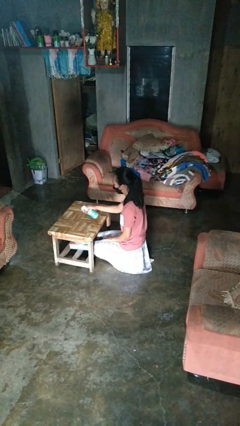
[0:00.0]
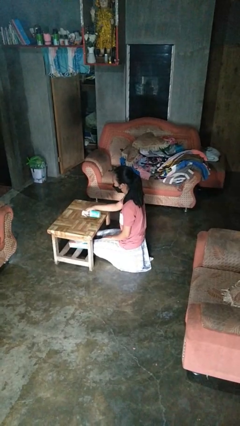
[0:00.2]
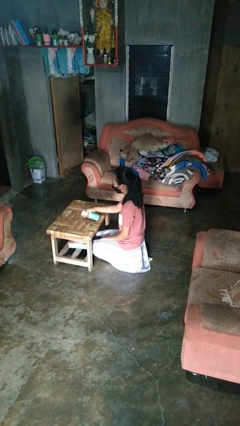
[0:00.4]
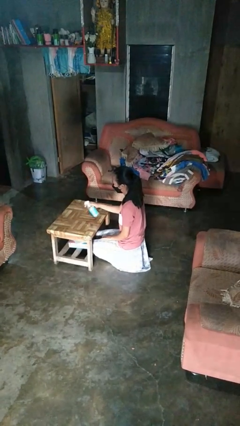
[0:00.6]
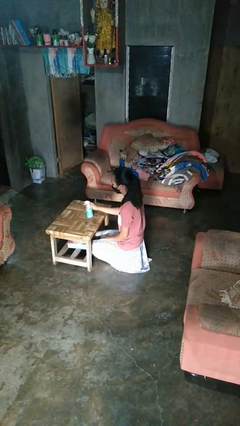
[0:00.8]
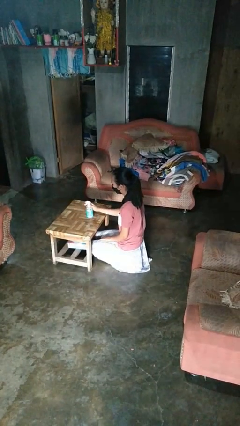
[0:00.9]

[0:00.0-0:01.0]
person sprays from bottle

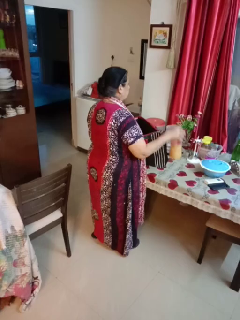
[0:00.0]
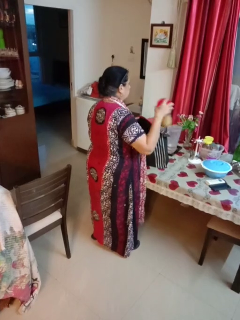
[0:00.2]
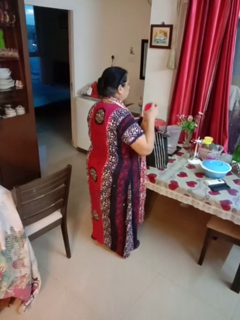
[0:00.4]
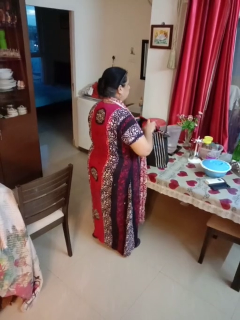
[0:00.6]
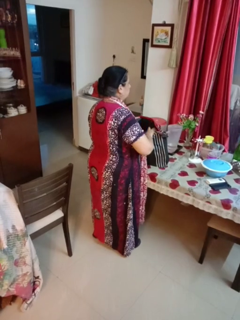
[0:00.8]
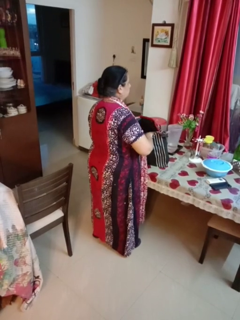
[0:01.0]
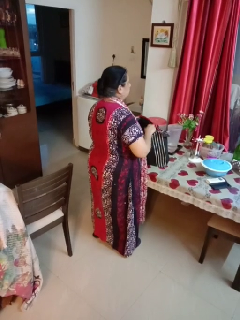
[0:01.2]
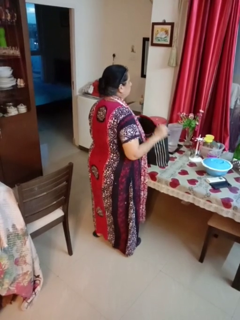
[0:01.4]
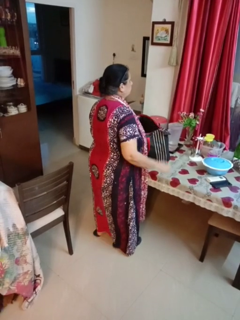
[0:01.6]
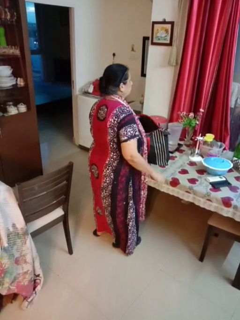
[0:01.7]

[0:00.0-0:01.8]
person puts object into bag

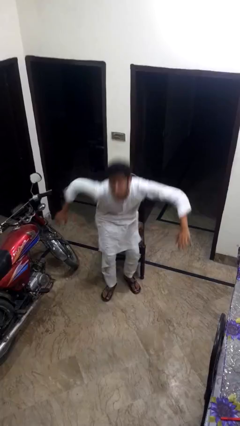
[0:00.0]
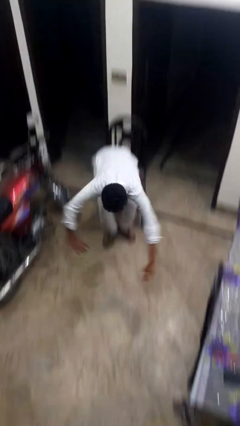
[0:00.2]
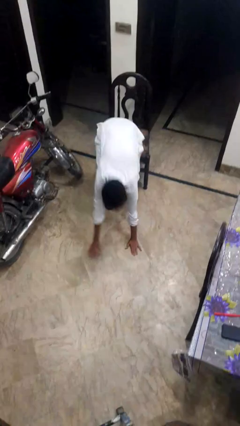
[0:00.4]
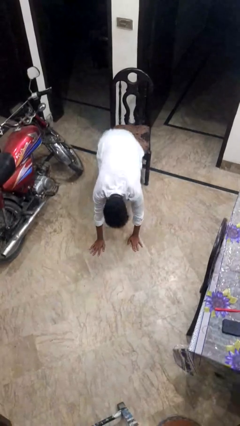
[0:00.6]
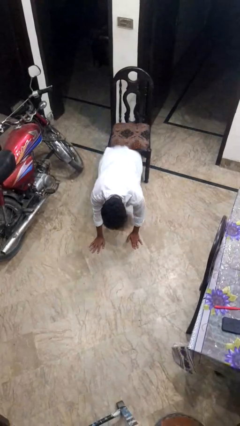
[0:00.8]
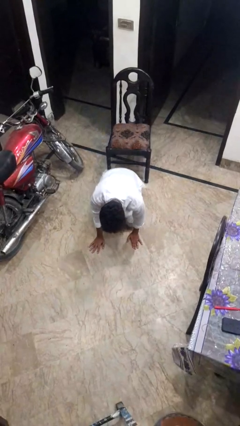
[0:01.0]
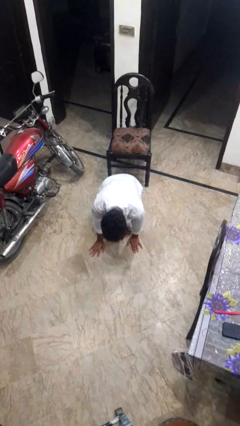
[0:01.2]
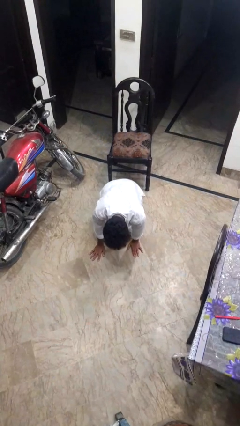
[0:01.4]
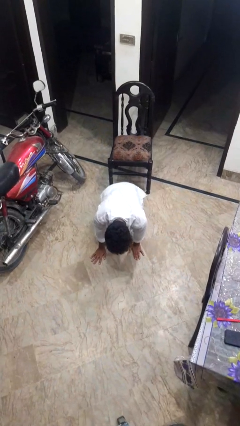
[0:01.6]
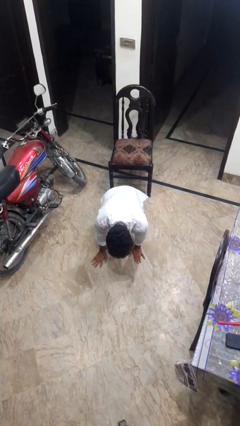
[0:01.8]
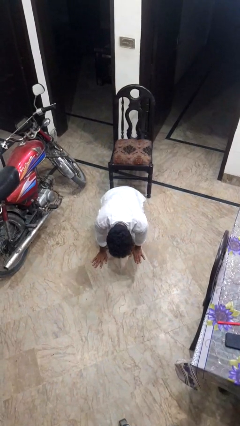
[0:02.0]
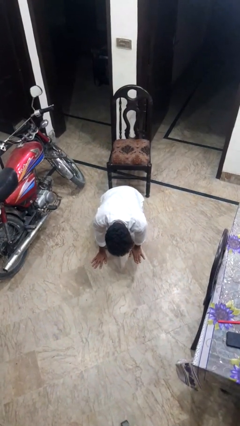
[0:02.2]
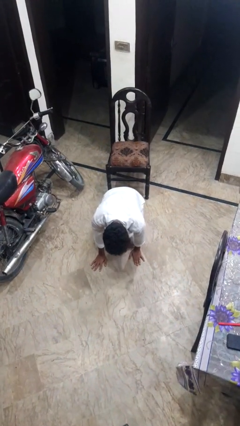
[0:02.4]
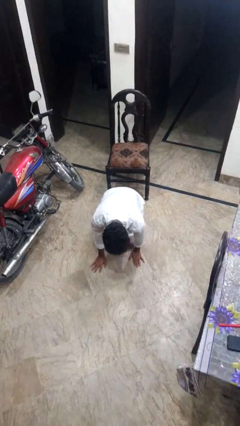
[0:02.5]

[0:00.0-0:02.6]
person falls from chair

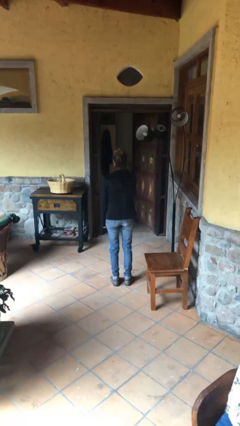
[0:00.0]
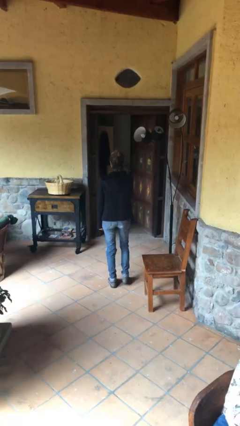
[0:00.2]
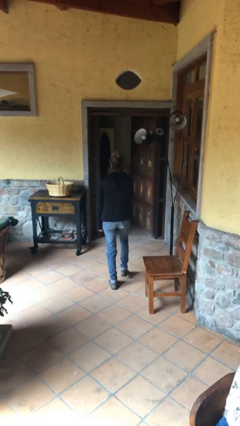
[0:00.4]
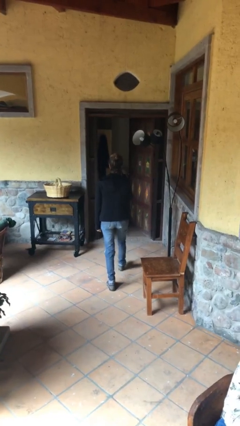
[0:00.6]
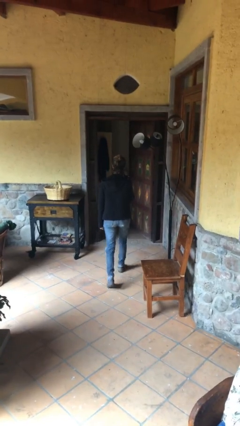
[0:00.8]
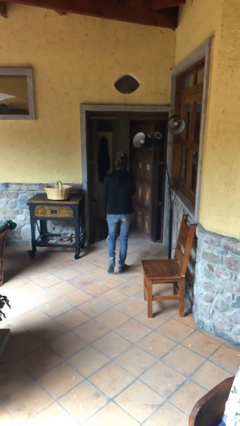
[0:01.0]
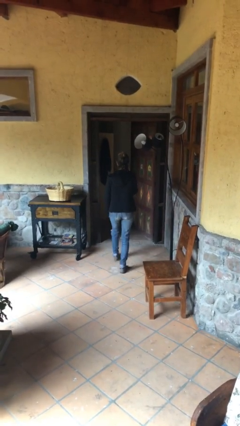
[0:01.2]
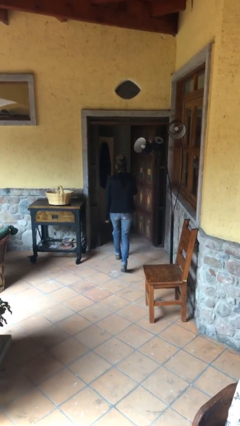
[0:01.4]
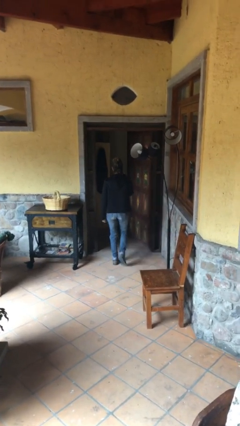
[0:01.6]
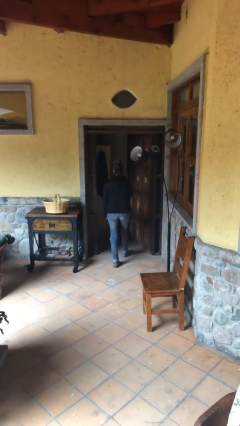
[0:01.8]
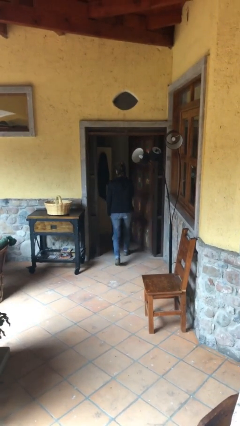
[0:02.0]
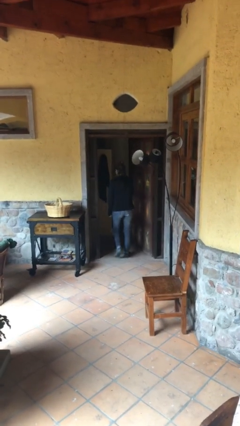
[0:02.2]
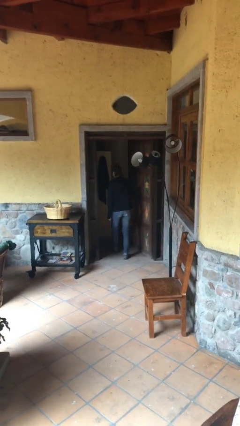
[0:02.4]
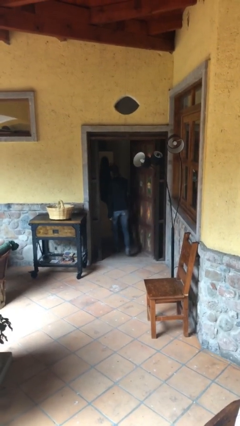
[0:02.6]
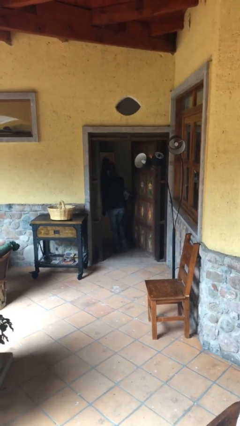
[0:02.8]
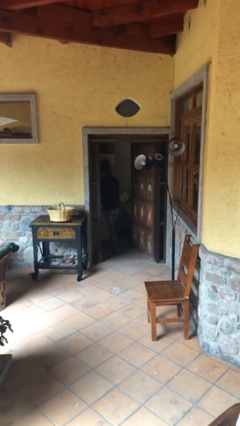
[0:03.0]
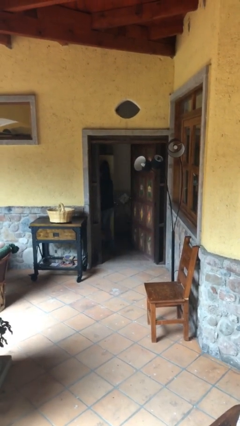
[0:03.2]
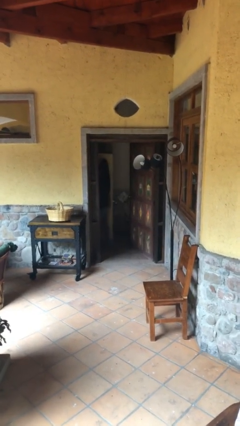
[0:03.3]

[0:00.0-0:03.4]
person exits scene through structure

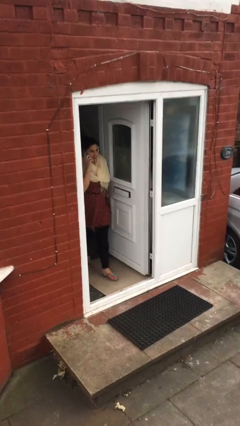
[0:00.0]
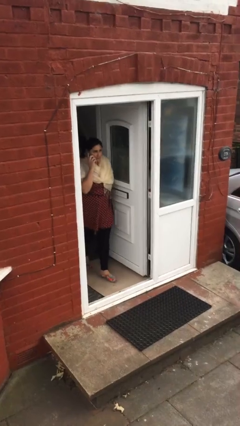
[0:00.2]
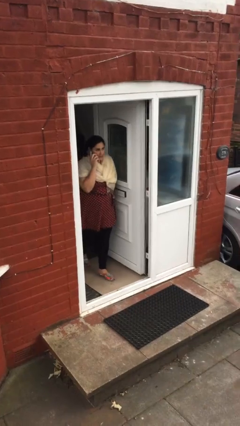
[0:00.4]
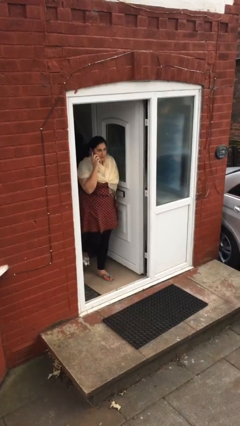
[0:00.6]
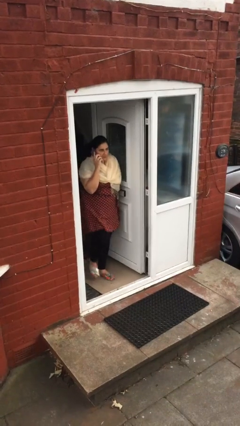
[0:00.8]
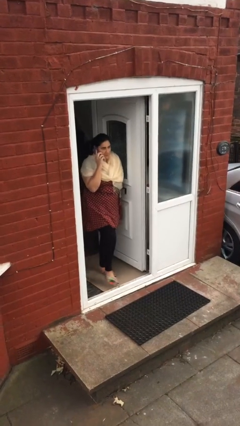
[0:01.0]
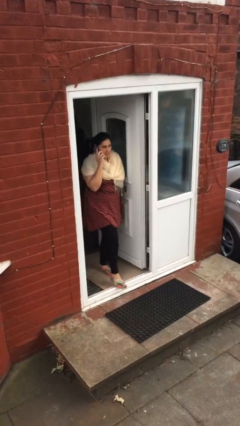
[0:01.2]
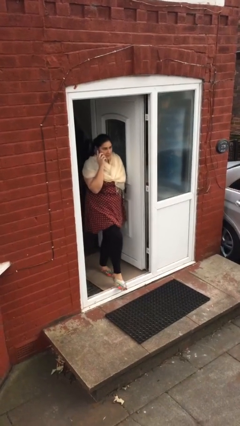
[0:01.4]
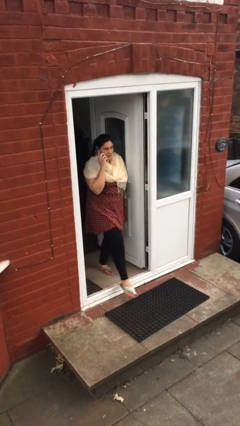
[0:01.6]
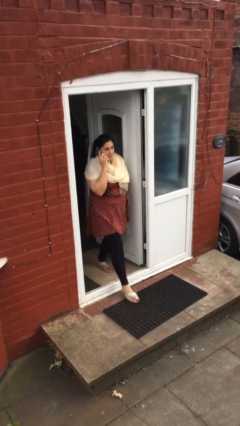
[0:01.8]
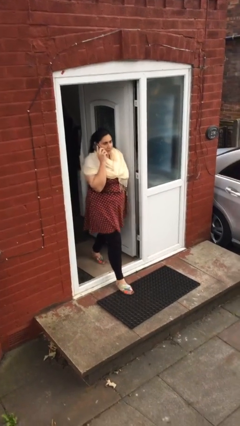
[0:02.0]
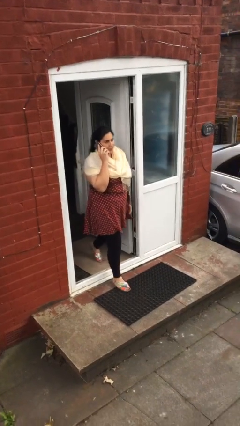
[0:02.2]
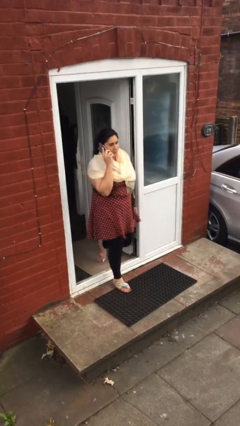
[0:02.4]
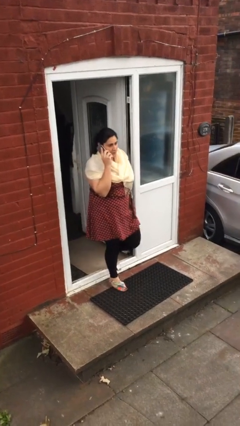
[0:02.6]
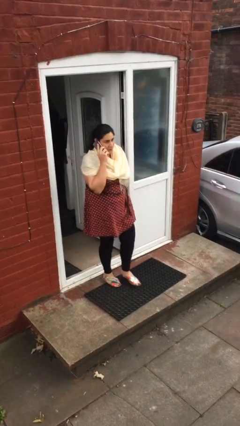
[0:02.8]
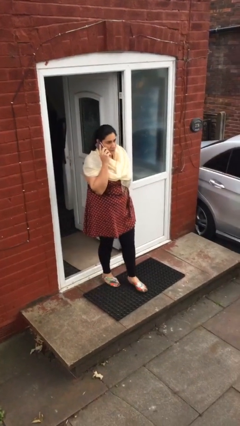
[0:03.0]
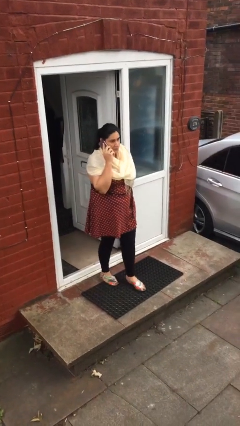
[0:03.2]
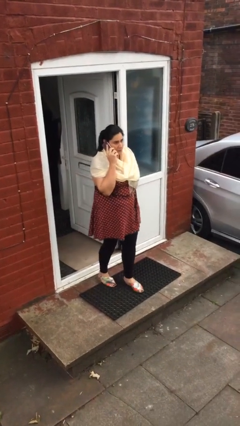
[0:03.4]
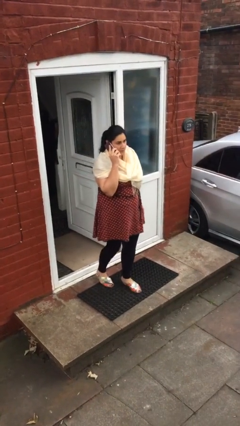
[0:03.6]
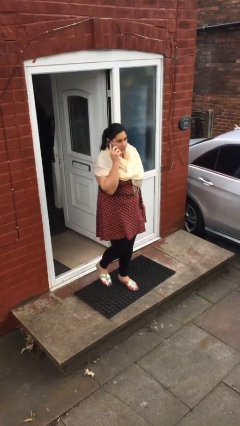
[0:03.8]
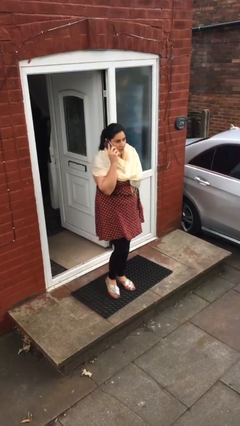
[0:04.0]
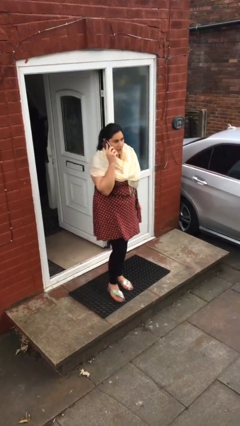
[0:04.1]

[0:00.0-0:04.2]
person enters scene through structure

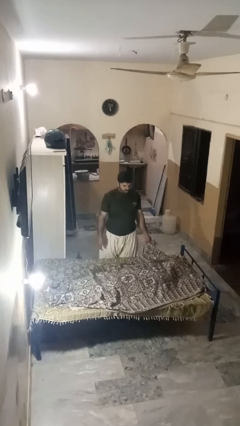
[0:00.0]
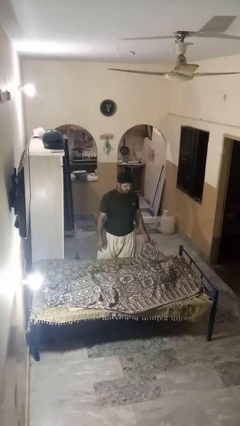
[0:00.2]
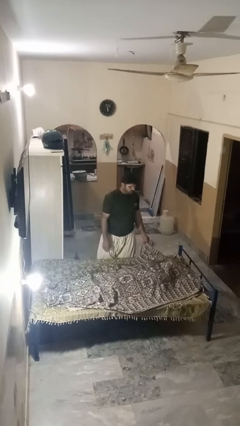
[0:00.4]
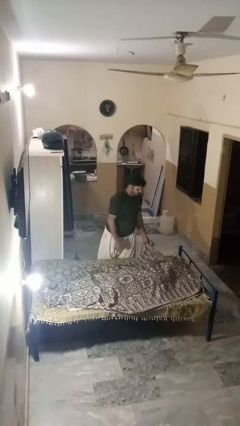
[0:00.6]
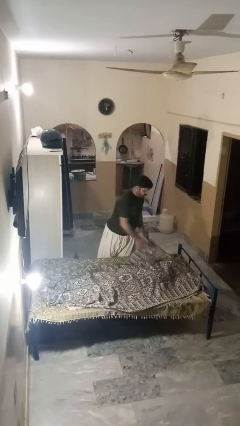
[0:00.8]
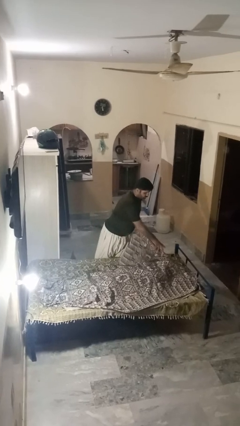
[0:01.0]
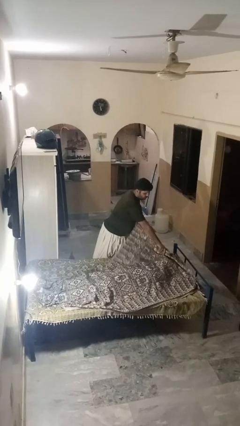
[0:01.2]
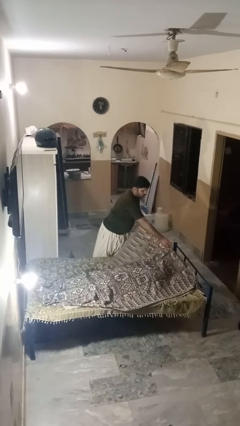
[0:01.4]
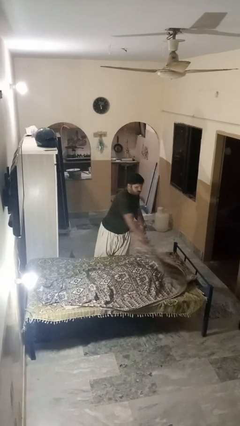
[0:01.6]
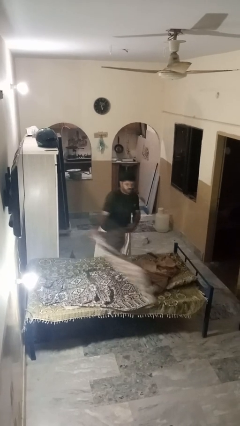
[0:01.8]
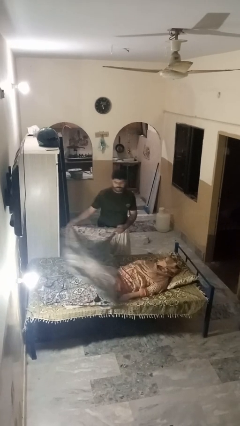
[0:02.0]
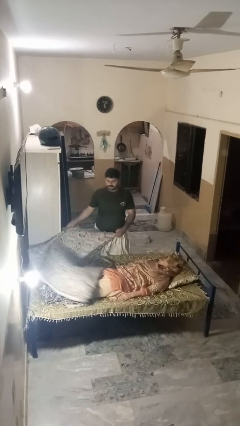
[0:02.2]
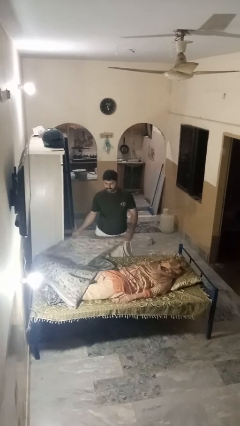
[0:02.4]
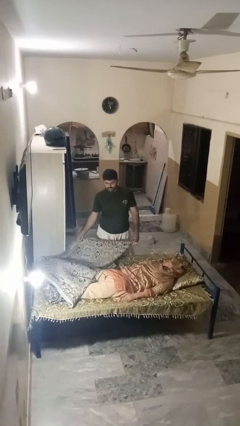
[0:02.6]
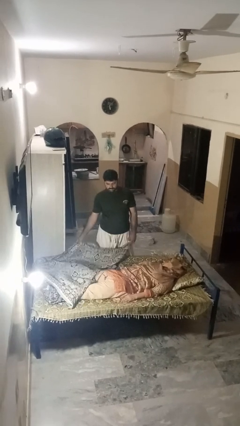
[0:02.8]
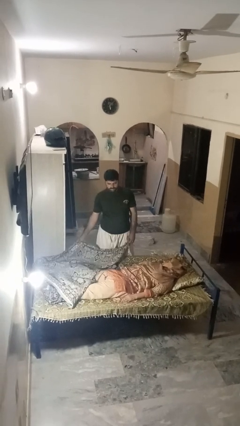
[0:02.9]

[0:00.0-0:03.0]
person uncovers friend with blanket

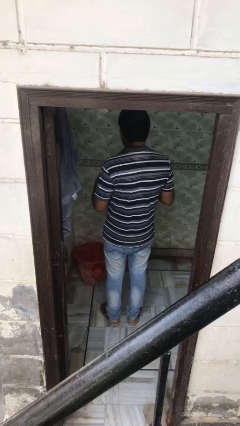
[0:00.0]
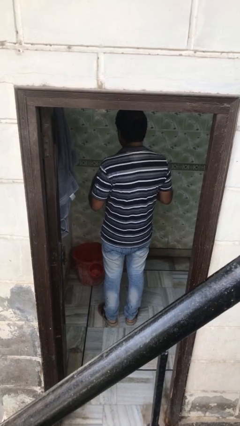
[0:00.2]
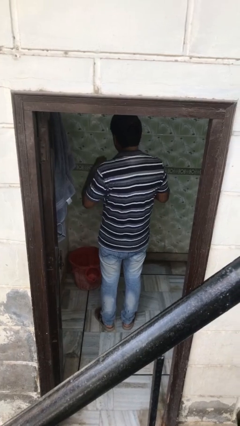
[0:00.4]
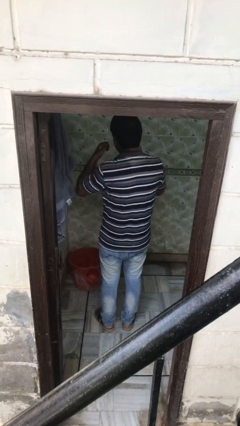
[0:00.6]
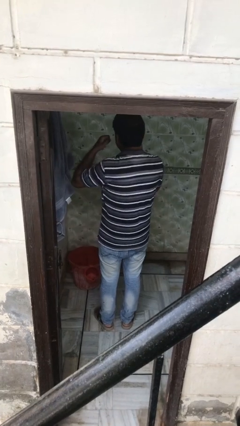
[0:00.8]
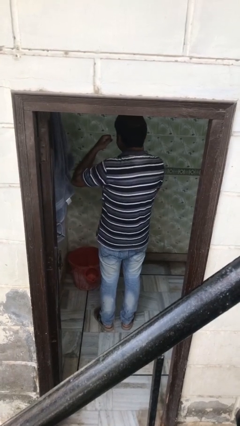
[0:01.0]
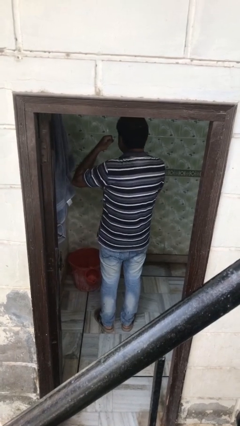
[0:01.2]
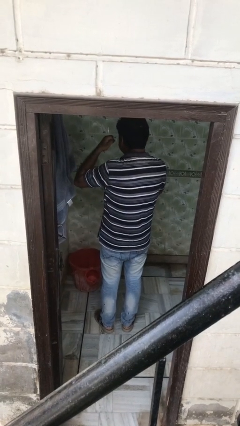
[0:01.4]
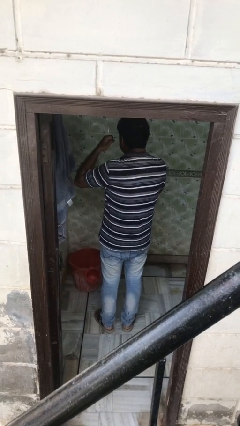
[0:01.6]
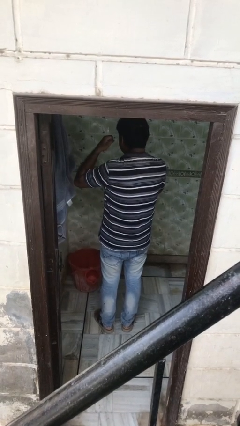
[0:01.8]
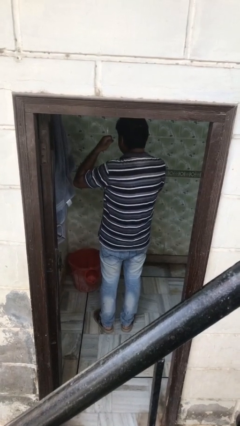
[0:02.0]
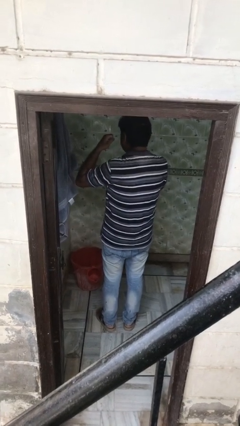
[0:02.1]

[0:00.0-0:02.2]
person flosses
